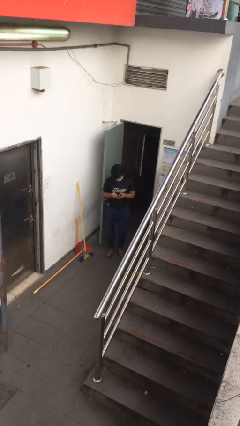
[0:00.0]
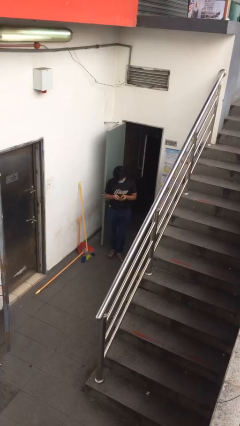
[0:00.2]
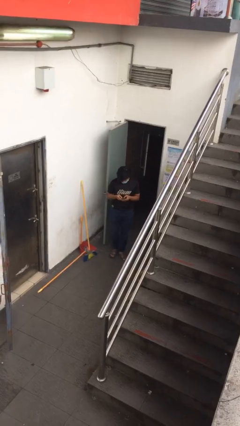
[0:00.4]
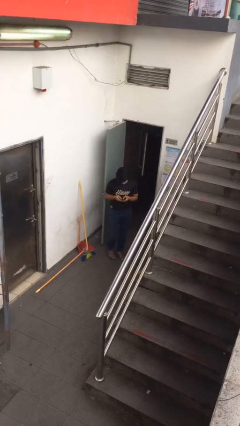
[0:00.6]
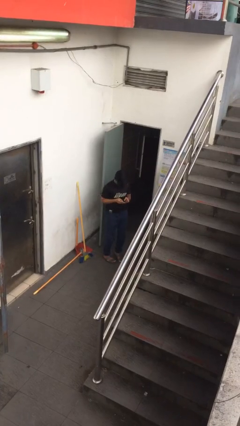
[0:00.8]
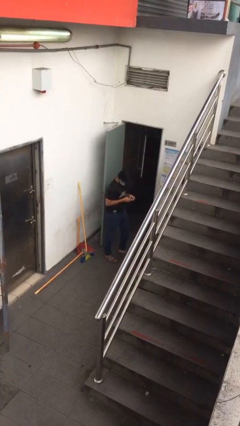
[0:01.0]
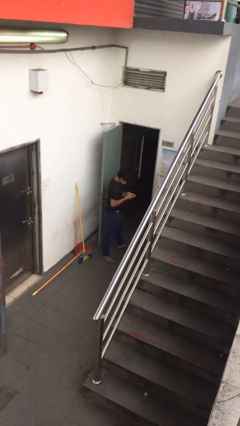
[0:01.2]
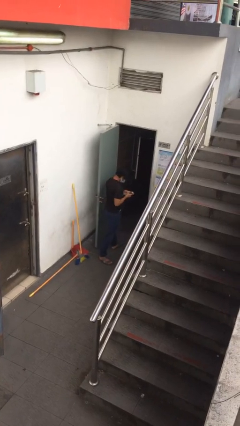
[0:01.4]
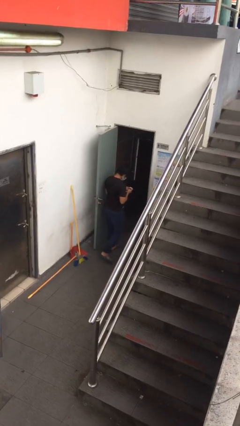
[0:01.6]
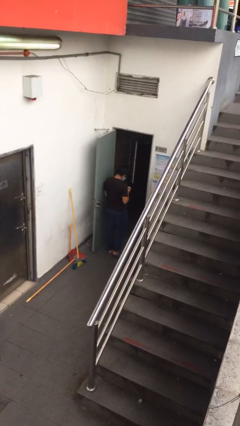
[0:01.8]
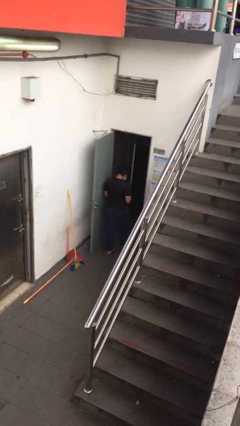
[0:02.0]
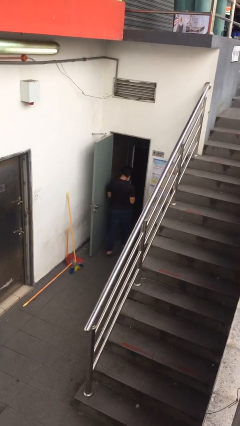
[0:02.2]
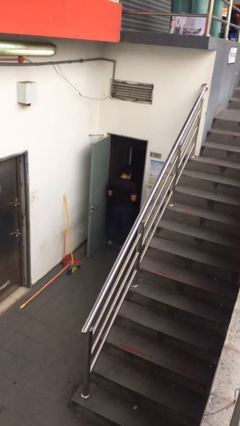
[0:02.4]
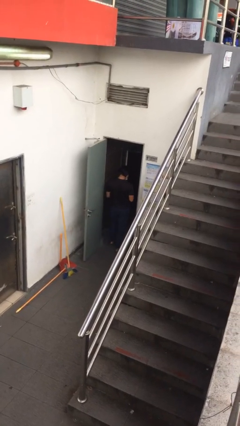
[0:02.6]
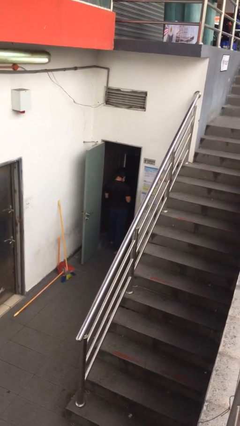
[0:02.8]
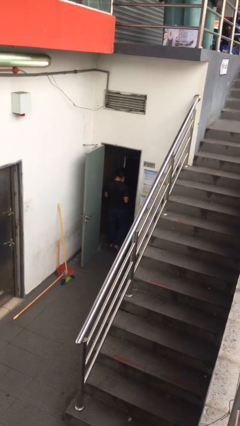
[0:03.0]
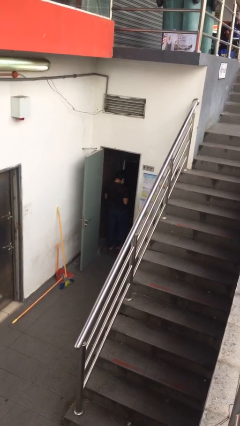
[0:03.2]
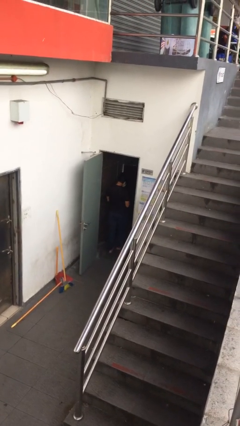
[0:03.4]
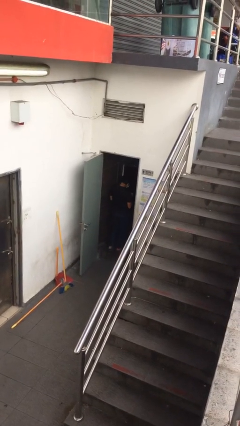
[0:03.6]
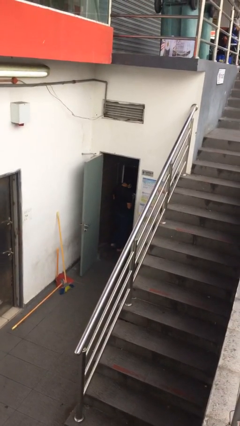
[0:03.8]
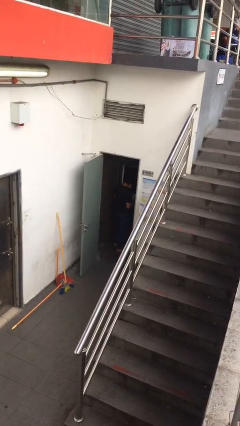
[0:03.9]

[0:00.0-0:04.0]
person exits scene through structure

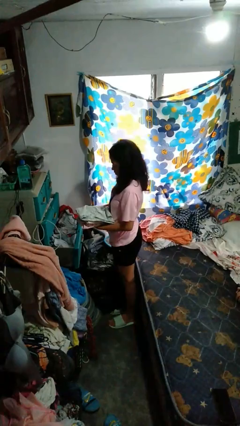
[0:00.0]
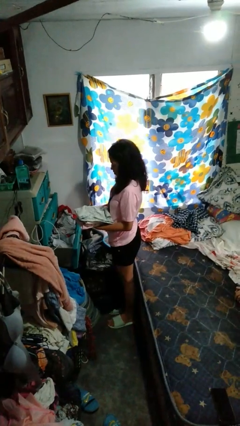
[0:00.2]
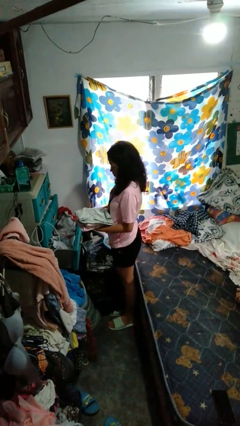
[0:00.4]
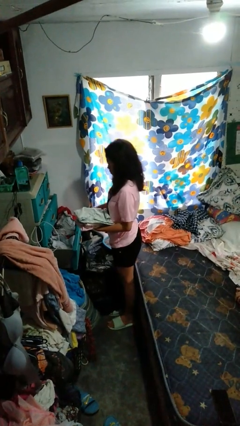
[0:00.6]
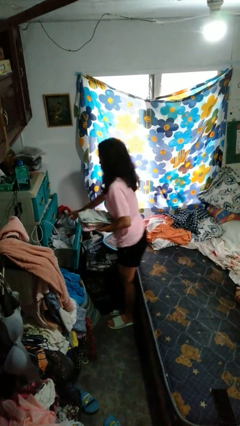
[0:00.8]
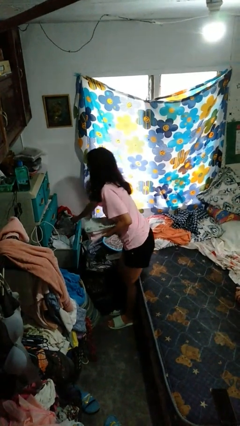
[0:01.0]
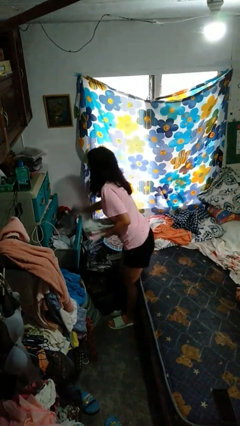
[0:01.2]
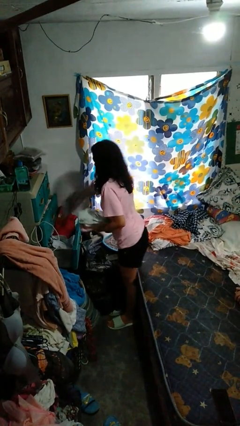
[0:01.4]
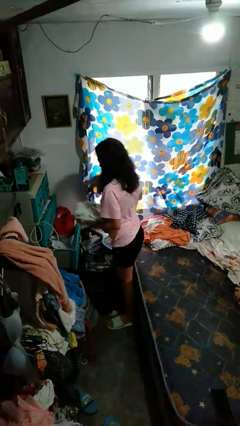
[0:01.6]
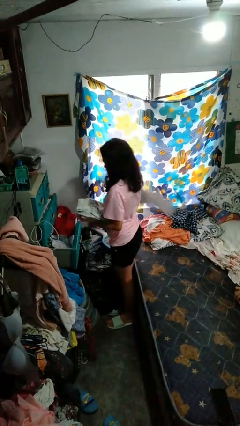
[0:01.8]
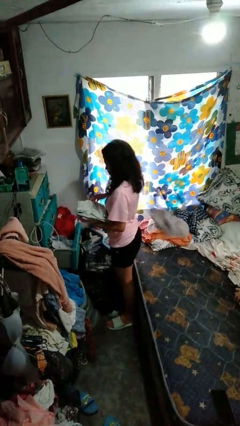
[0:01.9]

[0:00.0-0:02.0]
person takes clothes from dresser

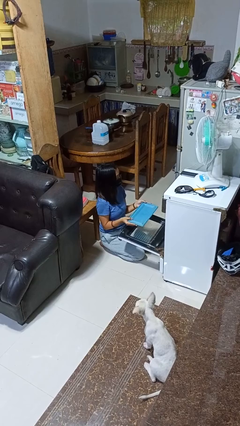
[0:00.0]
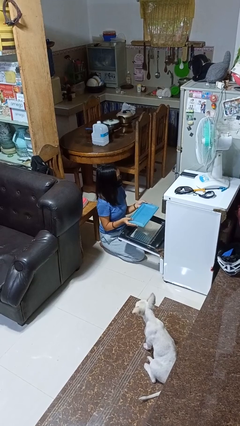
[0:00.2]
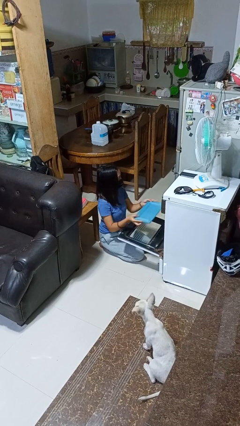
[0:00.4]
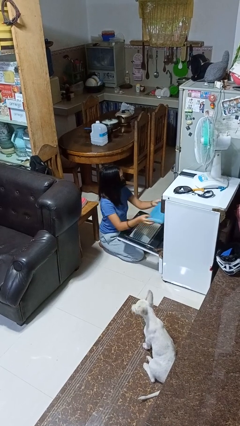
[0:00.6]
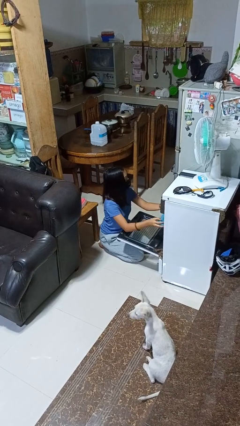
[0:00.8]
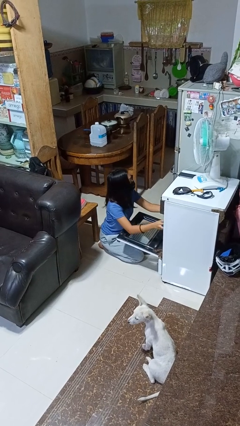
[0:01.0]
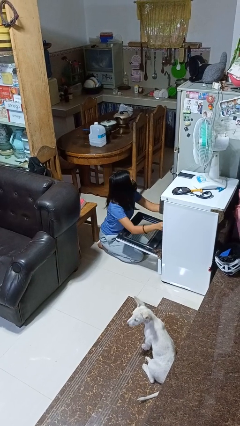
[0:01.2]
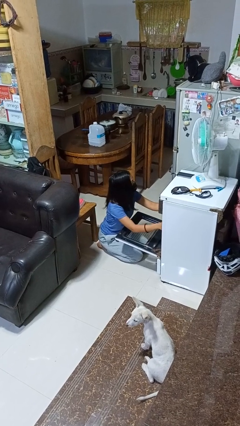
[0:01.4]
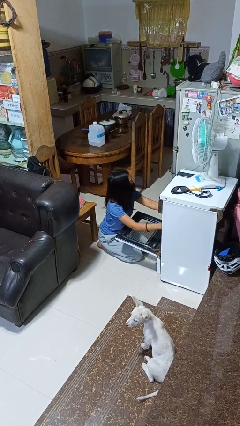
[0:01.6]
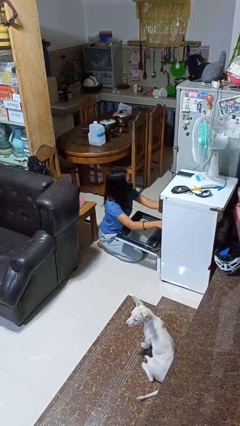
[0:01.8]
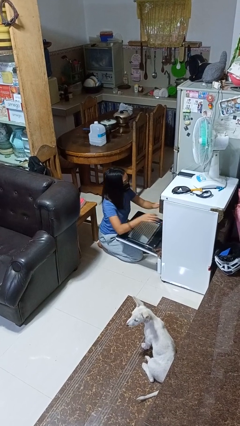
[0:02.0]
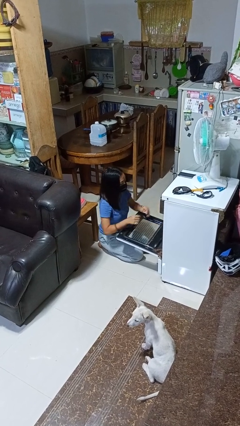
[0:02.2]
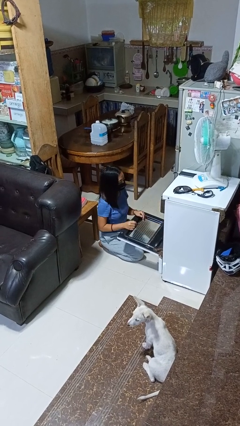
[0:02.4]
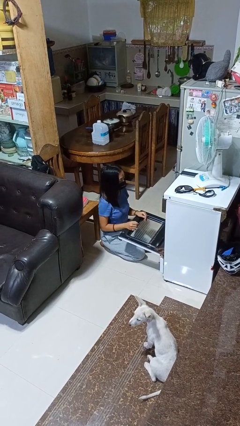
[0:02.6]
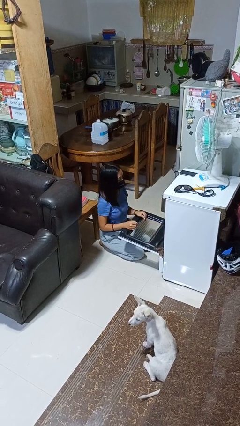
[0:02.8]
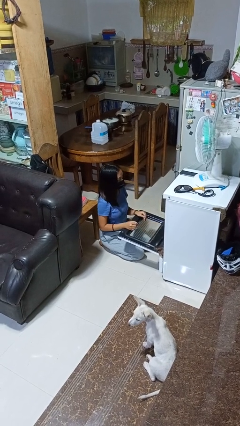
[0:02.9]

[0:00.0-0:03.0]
person puts object into oven

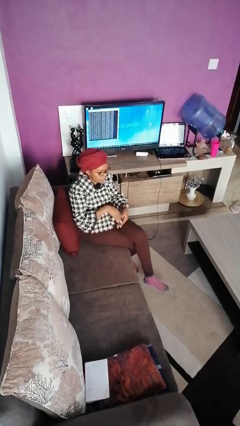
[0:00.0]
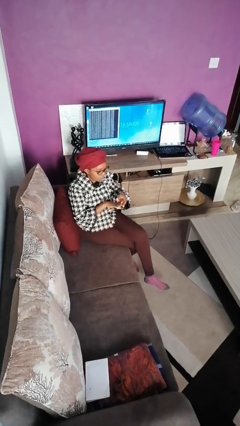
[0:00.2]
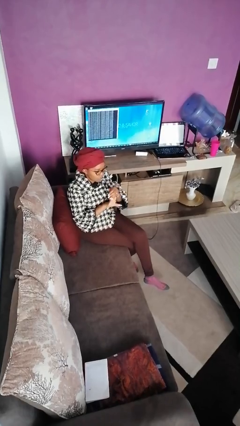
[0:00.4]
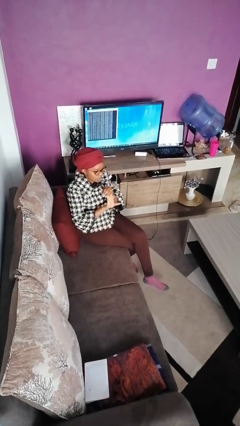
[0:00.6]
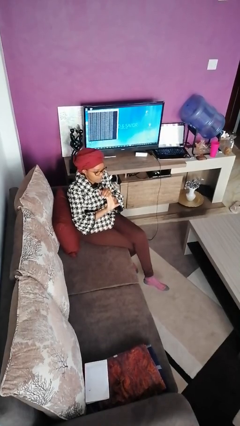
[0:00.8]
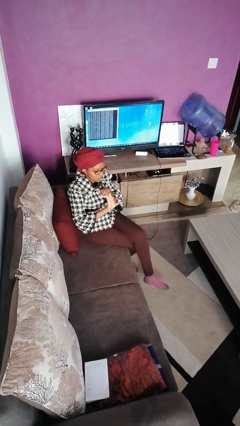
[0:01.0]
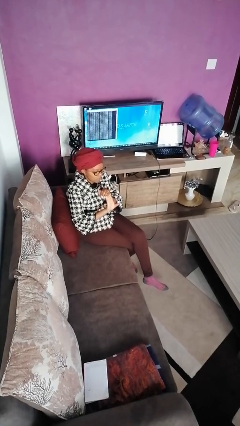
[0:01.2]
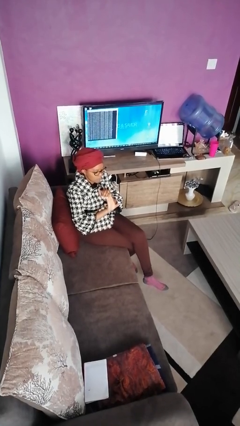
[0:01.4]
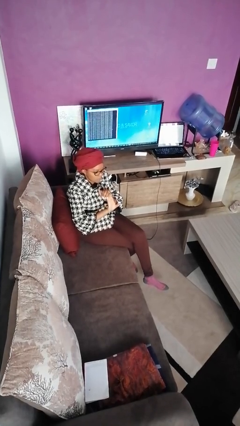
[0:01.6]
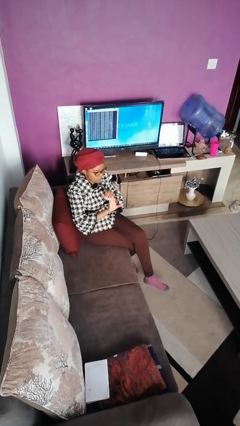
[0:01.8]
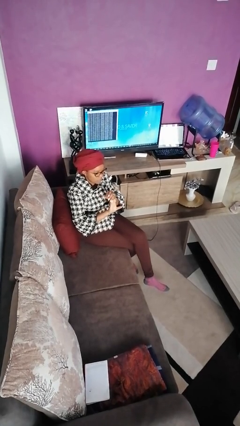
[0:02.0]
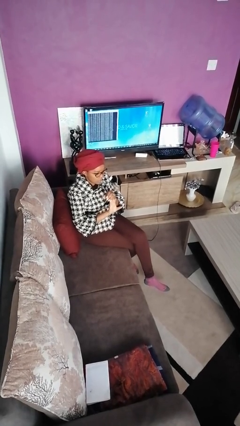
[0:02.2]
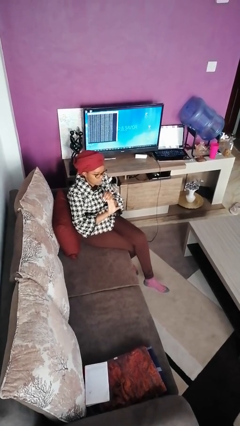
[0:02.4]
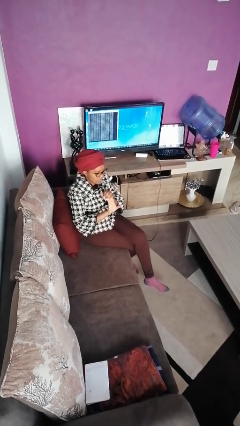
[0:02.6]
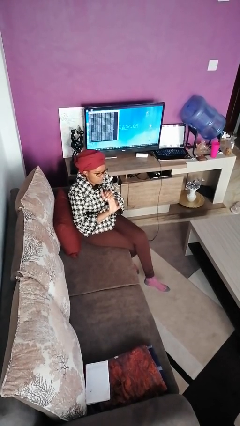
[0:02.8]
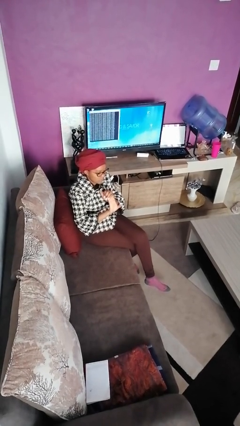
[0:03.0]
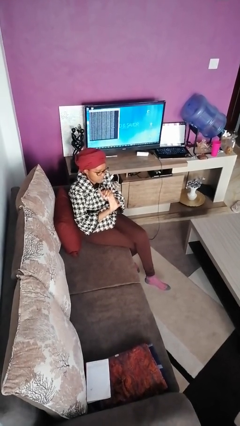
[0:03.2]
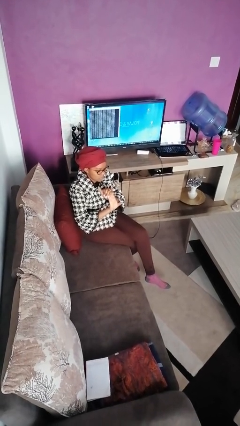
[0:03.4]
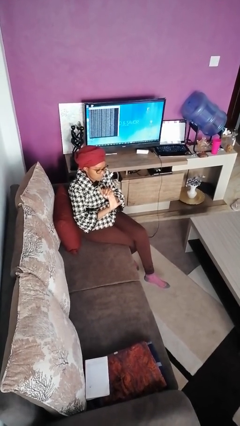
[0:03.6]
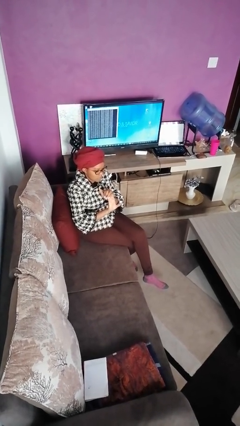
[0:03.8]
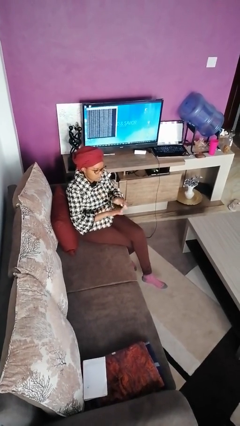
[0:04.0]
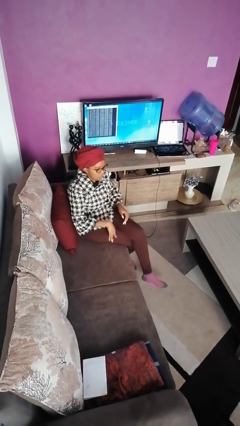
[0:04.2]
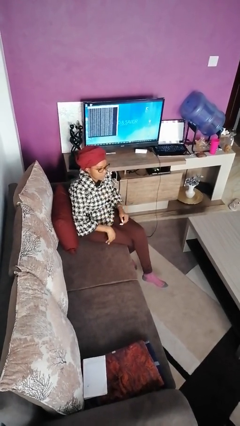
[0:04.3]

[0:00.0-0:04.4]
person cracks knuckles

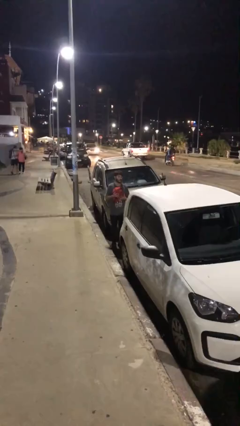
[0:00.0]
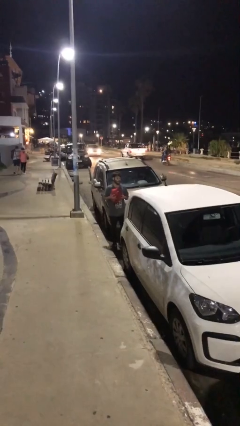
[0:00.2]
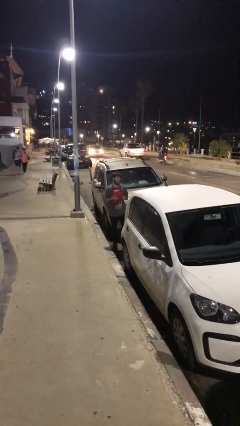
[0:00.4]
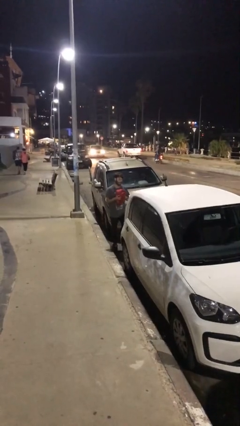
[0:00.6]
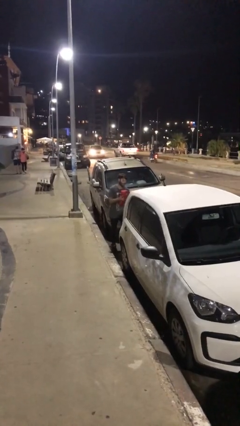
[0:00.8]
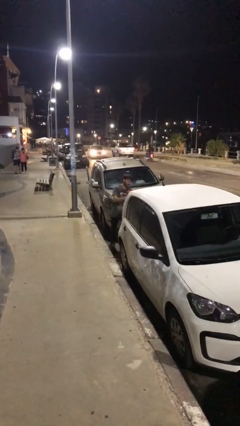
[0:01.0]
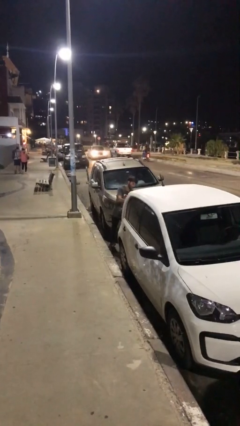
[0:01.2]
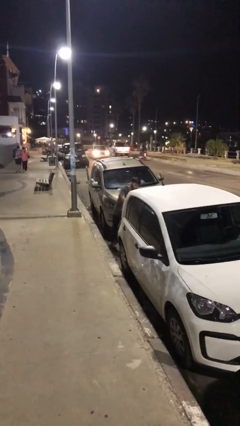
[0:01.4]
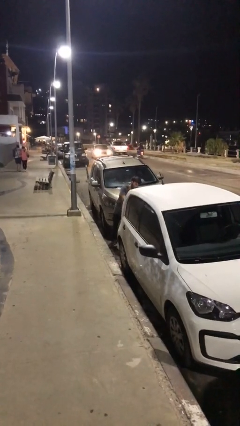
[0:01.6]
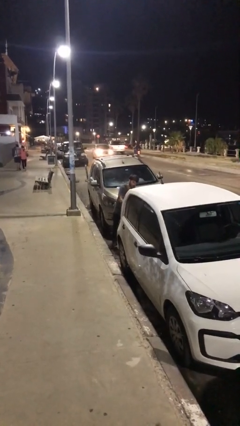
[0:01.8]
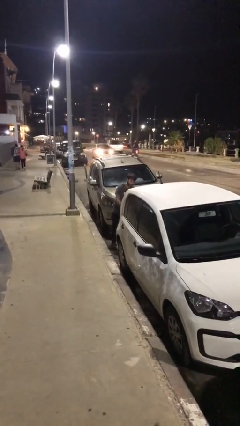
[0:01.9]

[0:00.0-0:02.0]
person loads car

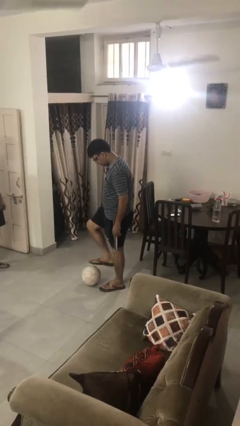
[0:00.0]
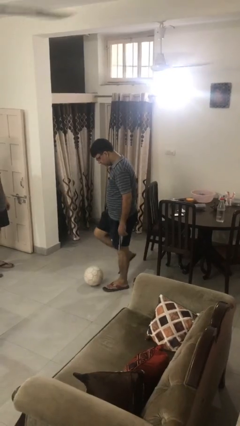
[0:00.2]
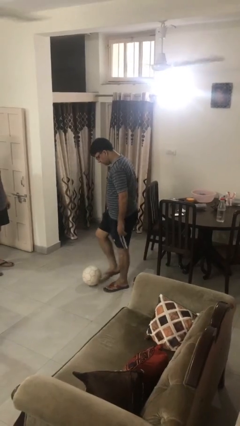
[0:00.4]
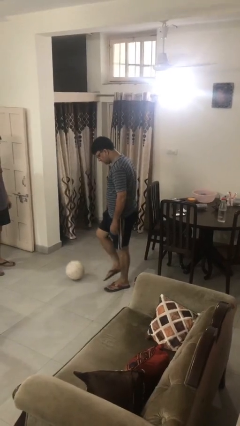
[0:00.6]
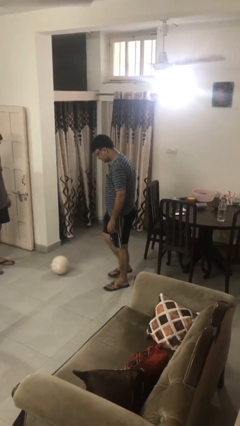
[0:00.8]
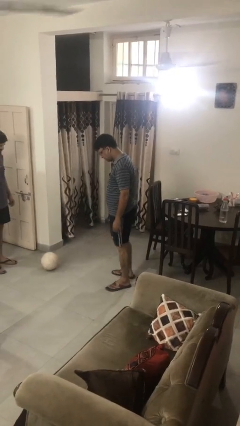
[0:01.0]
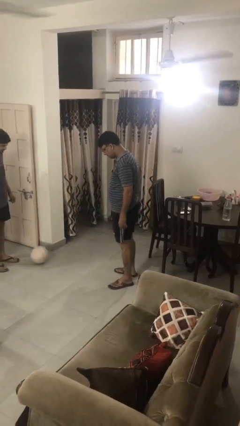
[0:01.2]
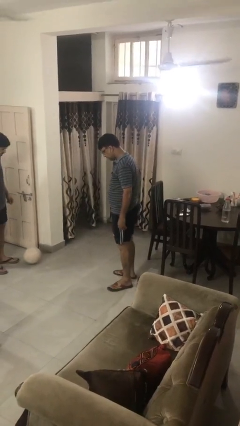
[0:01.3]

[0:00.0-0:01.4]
person kicks object to person

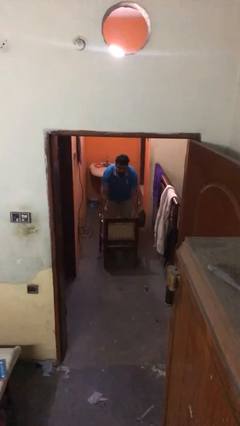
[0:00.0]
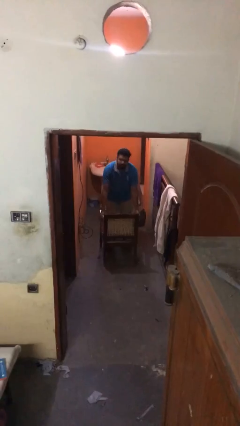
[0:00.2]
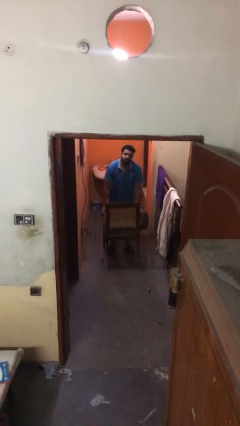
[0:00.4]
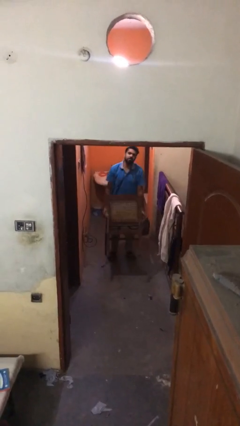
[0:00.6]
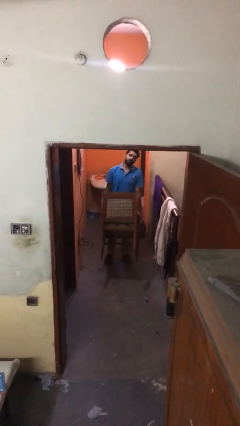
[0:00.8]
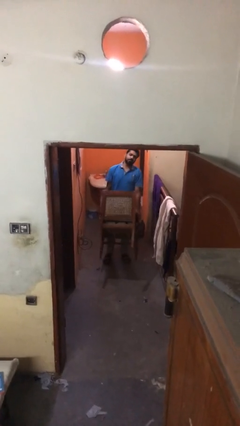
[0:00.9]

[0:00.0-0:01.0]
person picks up object from floor
